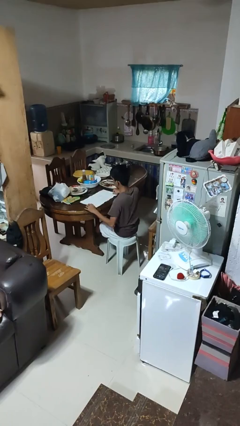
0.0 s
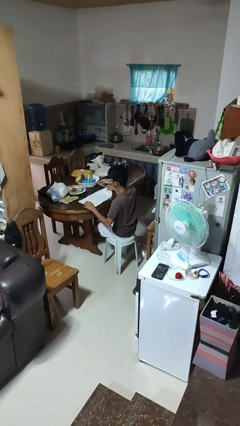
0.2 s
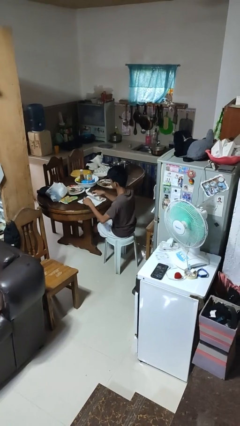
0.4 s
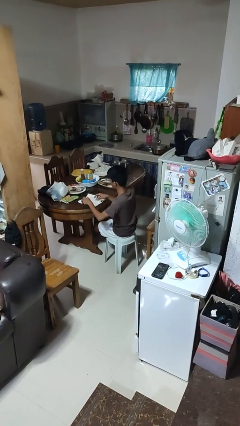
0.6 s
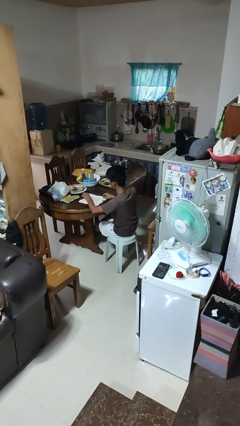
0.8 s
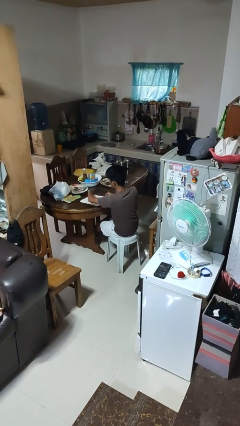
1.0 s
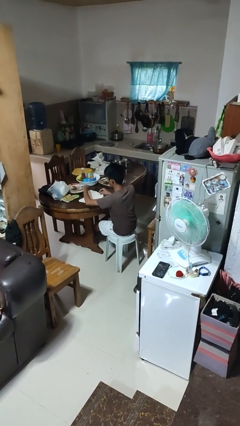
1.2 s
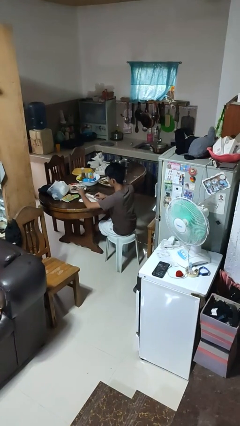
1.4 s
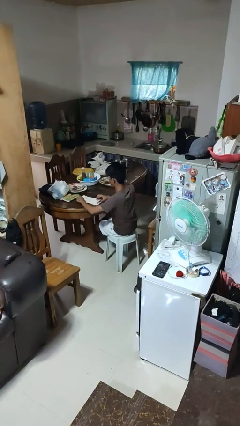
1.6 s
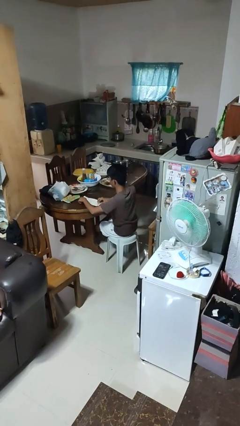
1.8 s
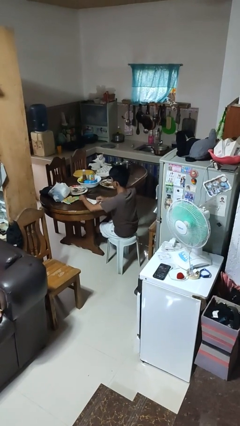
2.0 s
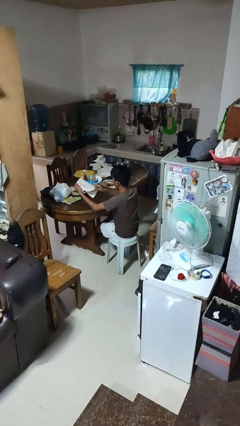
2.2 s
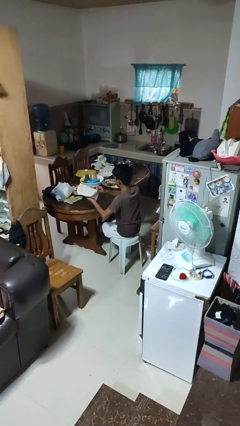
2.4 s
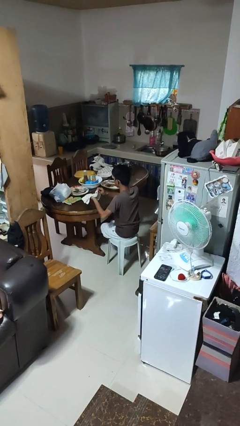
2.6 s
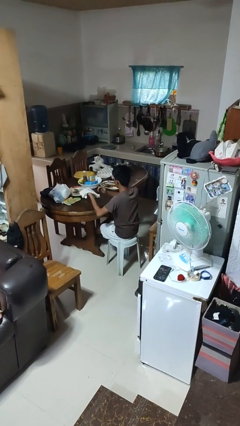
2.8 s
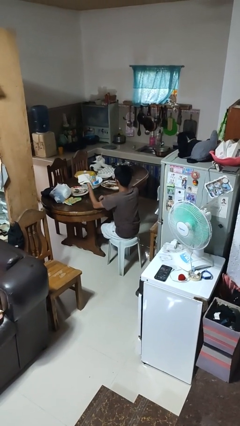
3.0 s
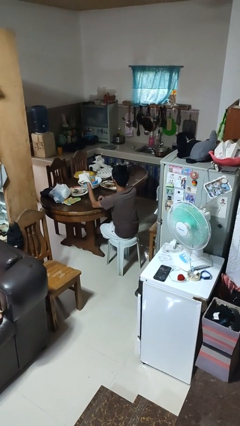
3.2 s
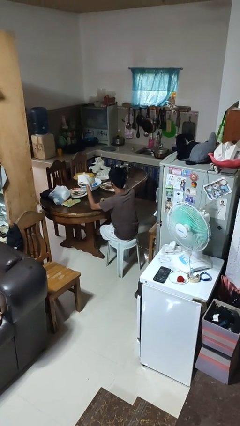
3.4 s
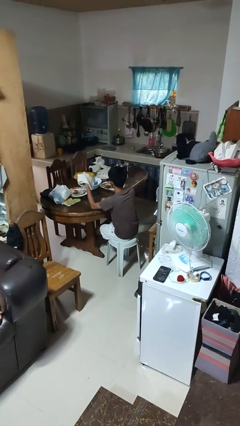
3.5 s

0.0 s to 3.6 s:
person folds tablecloth

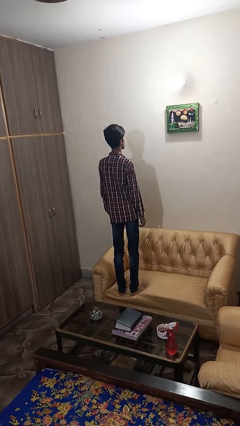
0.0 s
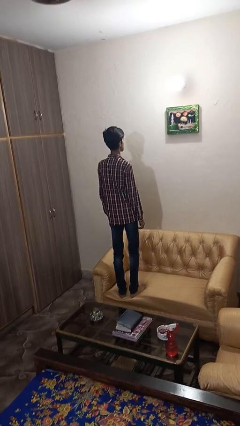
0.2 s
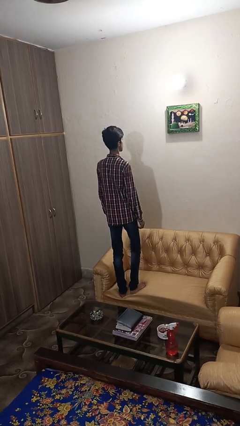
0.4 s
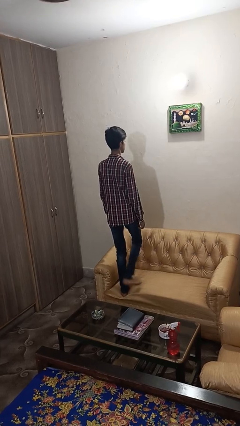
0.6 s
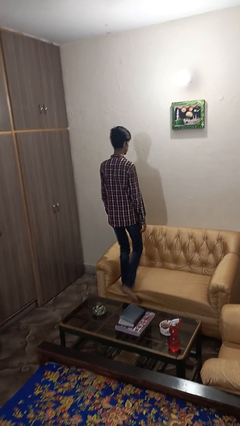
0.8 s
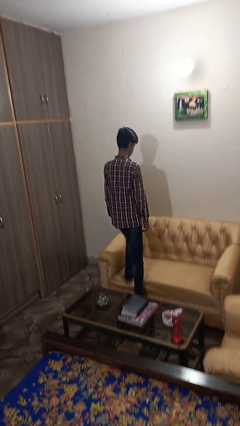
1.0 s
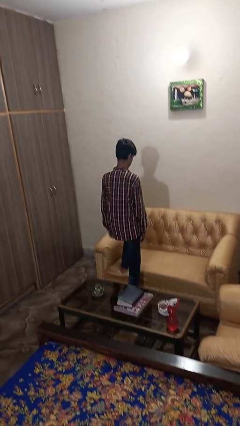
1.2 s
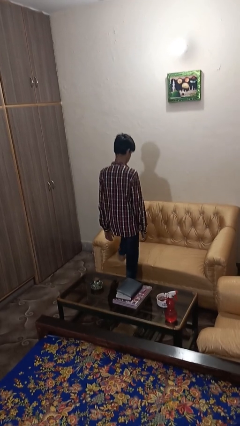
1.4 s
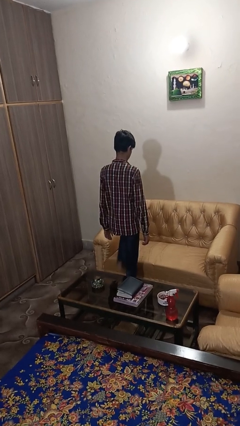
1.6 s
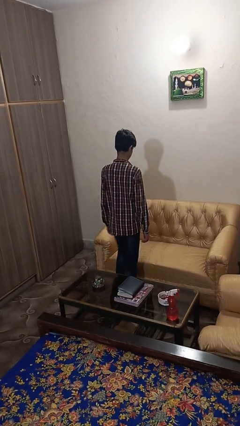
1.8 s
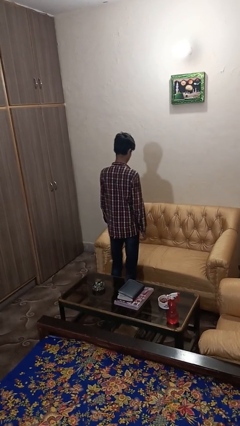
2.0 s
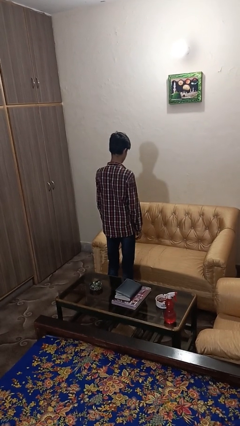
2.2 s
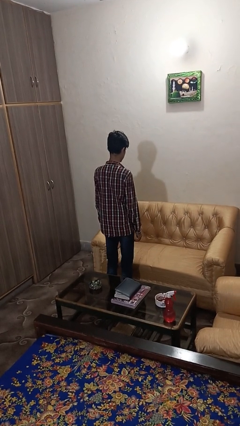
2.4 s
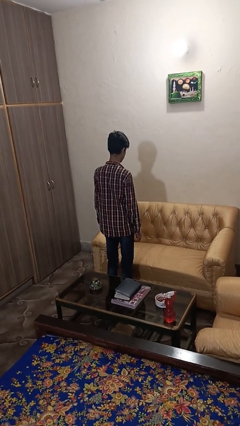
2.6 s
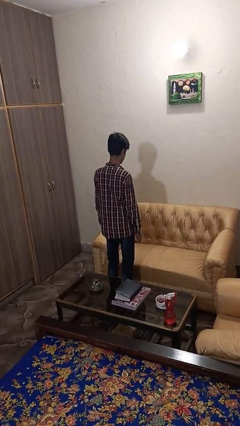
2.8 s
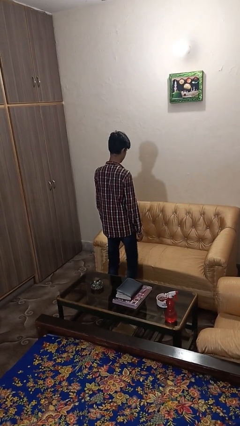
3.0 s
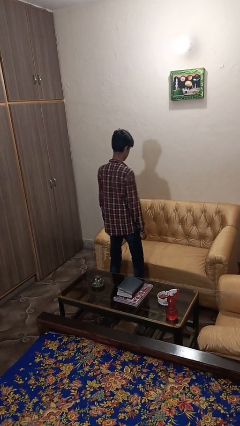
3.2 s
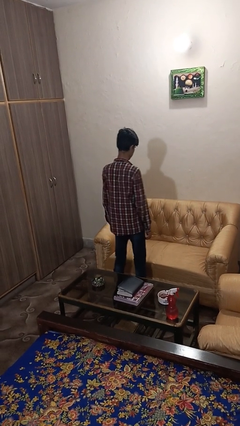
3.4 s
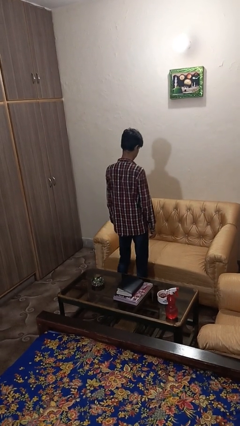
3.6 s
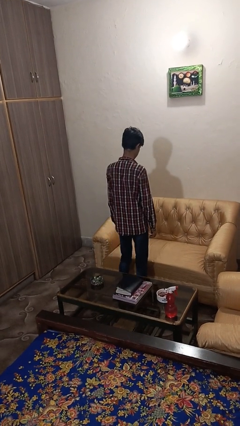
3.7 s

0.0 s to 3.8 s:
person climbs off couch

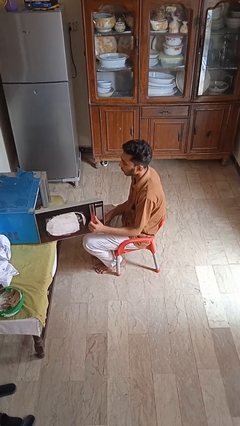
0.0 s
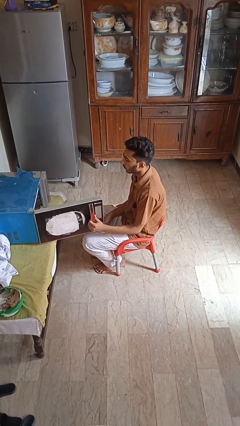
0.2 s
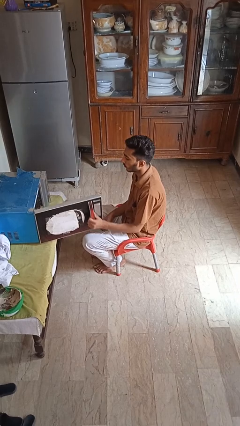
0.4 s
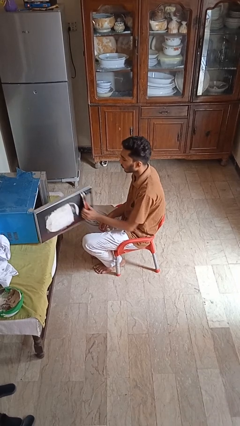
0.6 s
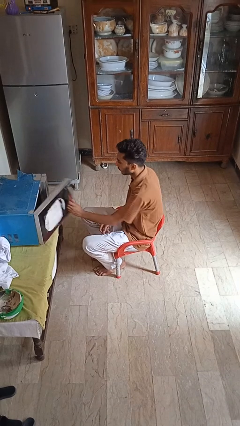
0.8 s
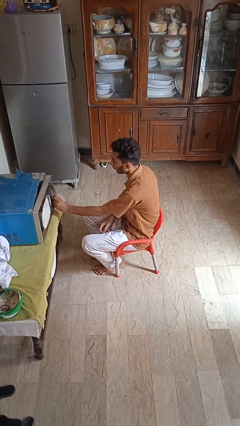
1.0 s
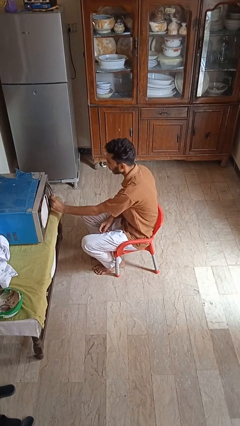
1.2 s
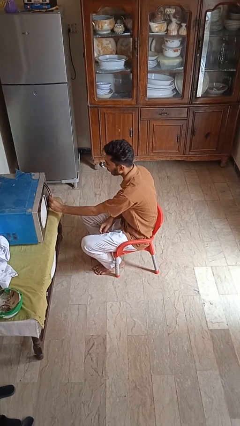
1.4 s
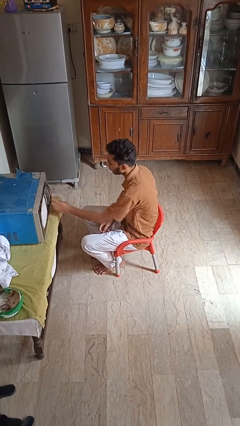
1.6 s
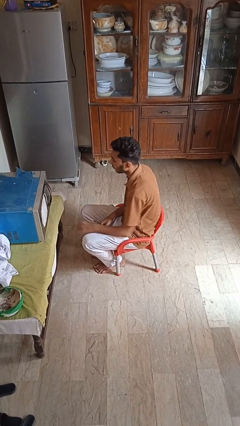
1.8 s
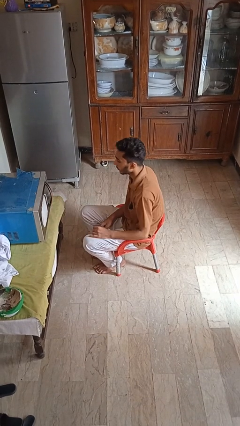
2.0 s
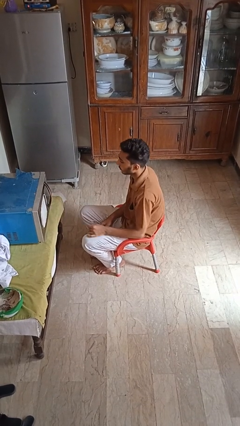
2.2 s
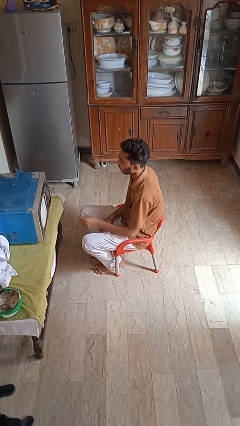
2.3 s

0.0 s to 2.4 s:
person closes microwave

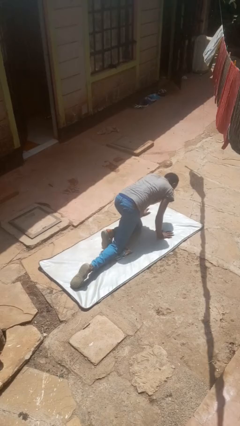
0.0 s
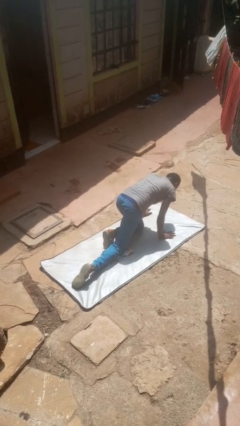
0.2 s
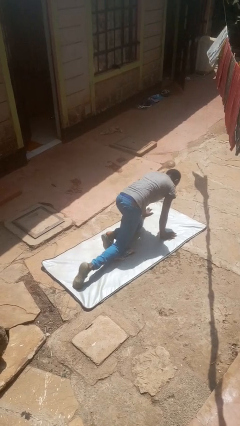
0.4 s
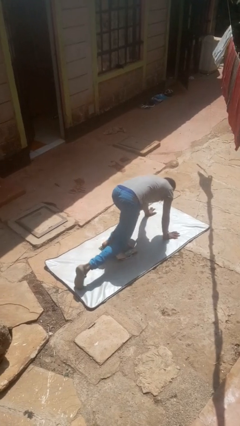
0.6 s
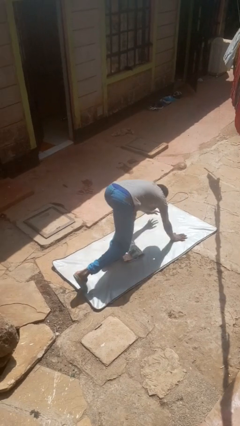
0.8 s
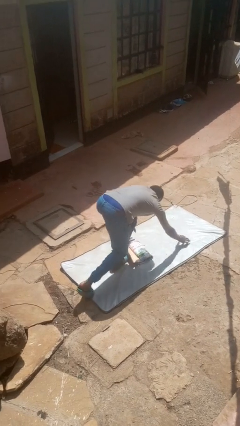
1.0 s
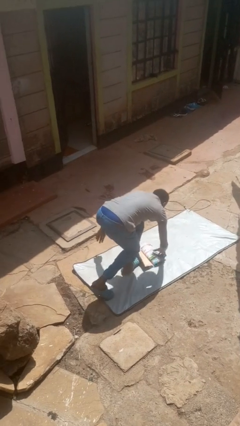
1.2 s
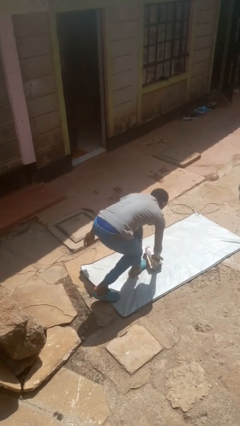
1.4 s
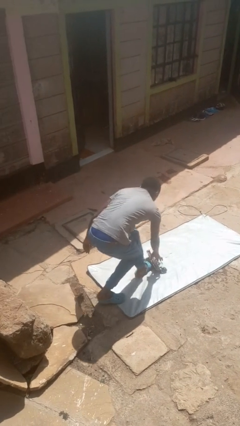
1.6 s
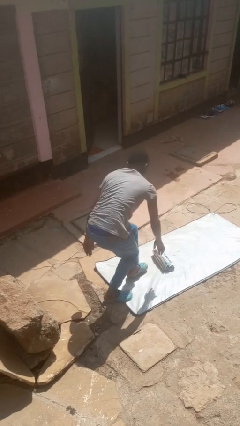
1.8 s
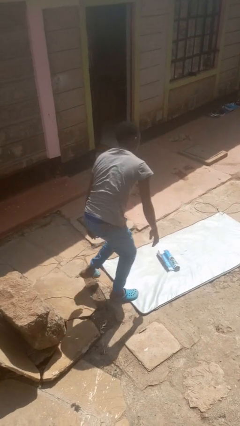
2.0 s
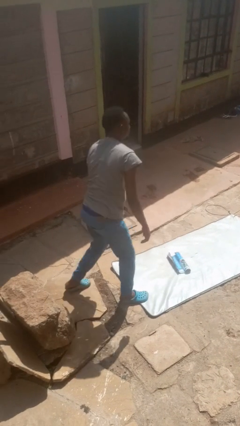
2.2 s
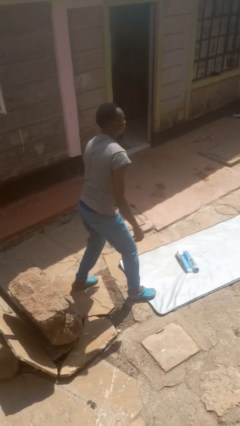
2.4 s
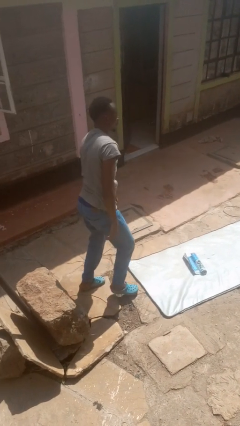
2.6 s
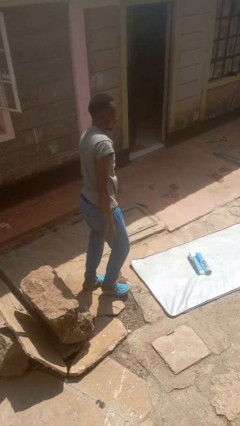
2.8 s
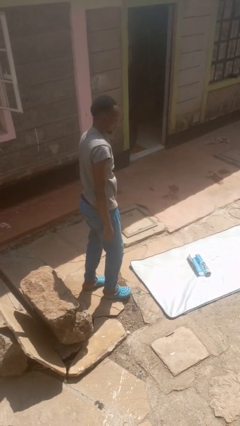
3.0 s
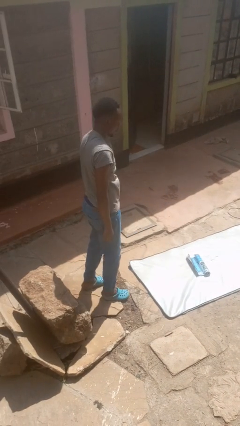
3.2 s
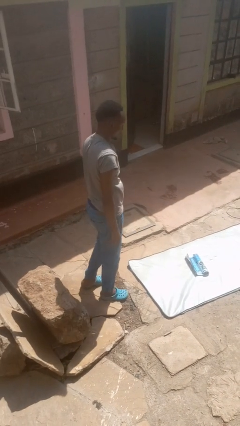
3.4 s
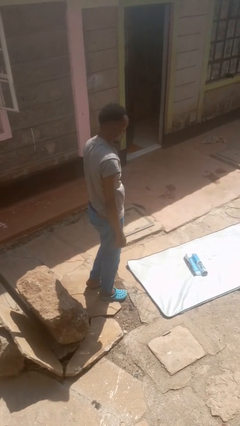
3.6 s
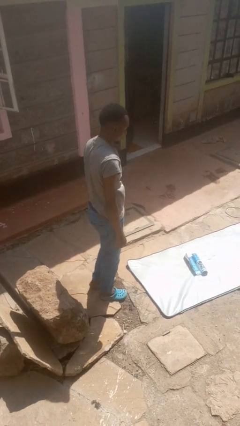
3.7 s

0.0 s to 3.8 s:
person stands up from floor

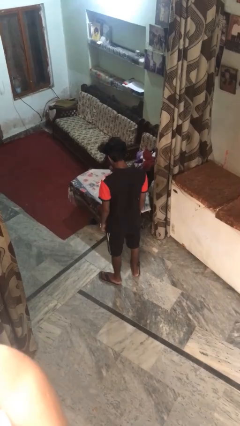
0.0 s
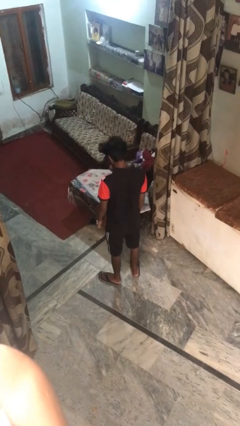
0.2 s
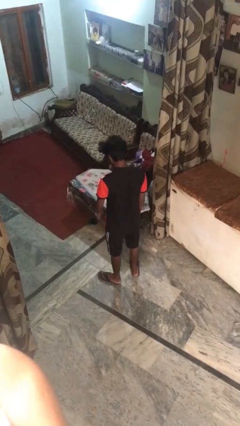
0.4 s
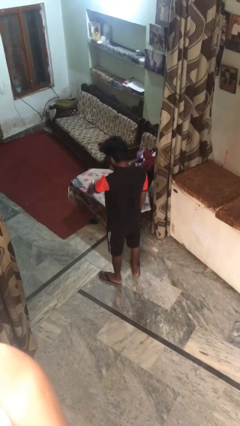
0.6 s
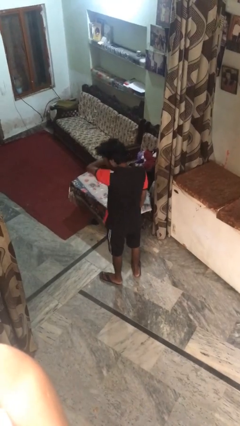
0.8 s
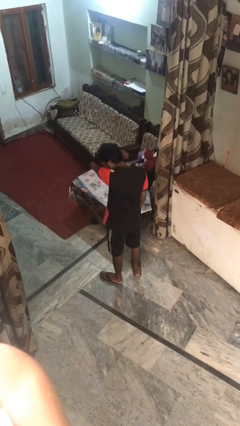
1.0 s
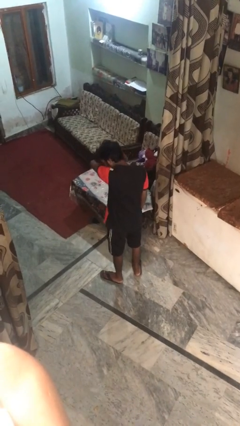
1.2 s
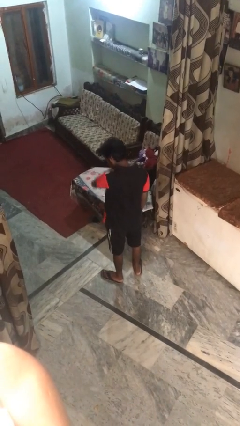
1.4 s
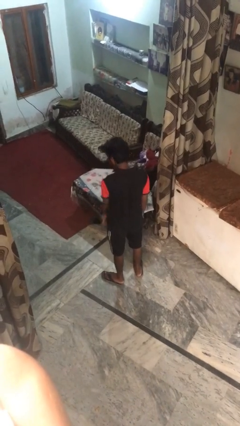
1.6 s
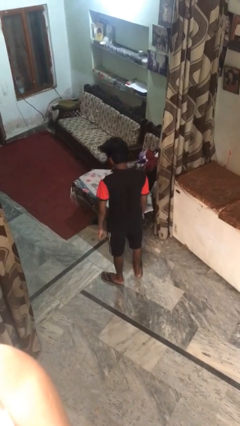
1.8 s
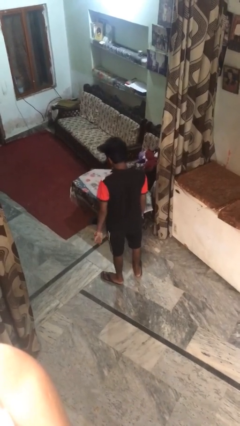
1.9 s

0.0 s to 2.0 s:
person sneezes into arm

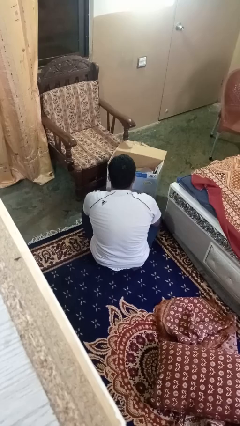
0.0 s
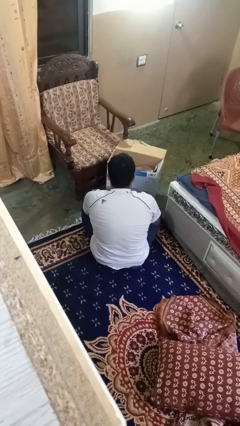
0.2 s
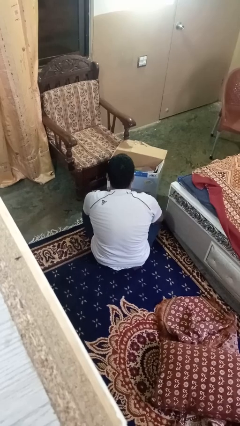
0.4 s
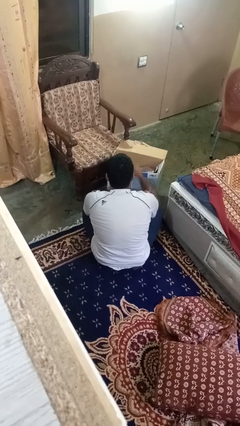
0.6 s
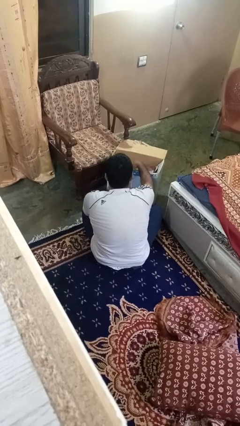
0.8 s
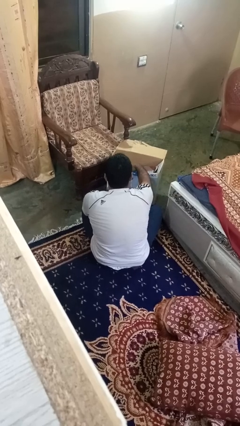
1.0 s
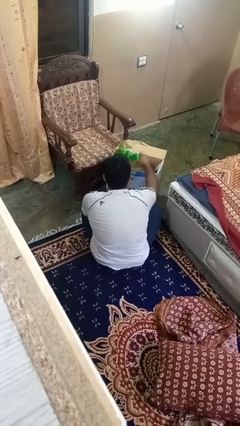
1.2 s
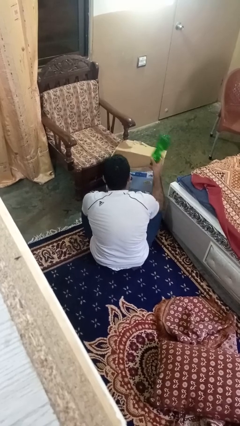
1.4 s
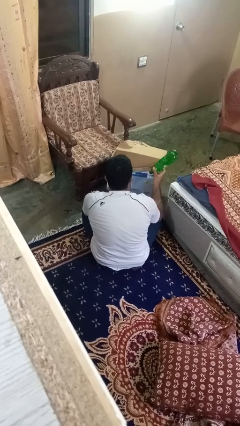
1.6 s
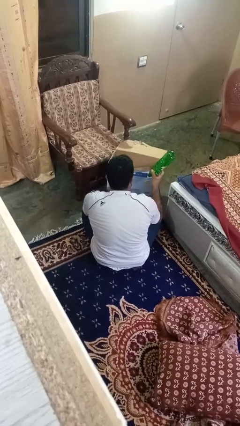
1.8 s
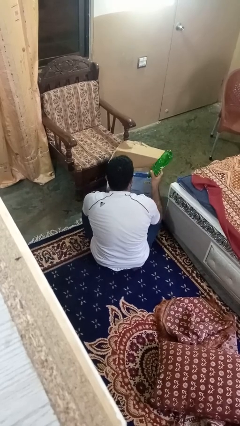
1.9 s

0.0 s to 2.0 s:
person takes object from box

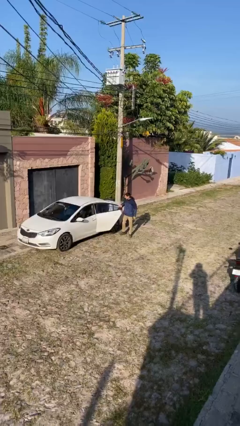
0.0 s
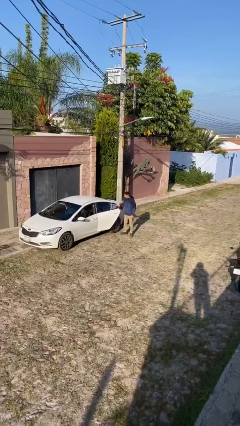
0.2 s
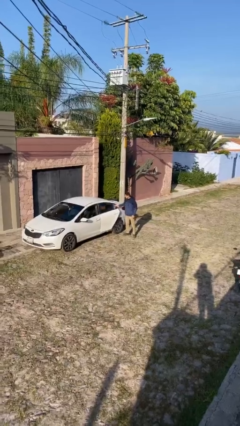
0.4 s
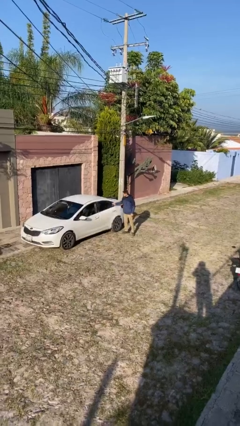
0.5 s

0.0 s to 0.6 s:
person closes car door
